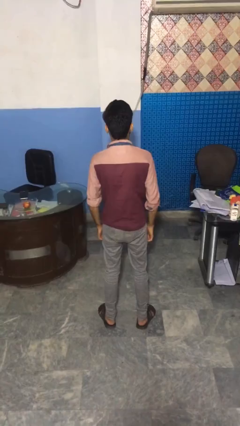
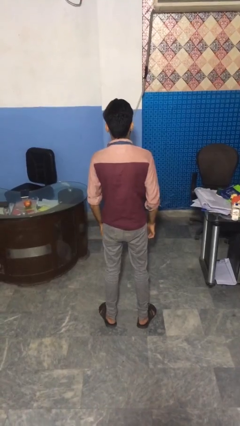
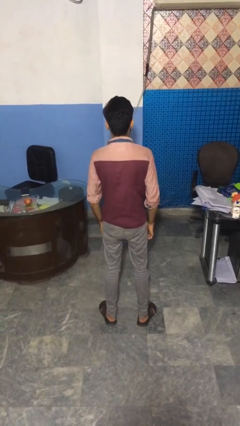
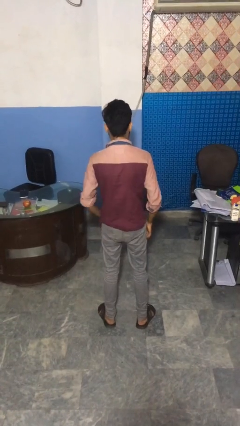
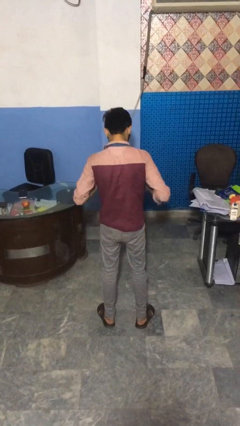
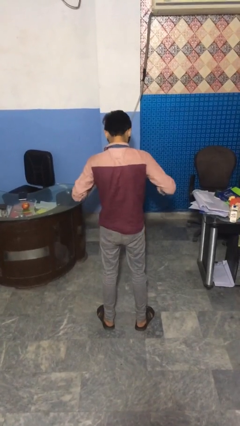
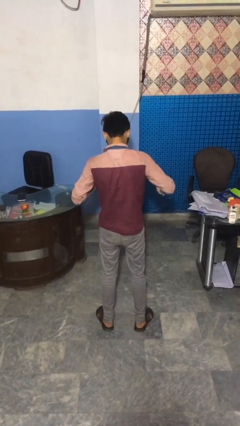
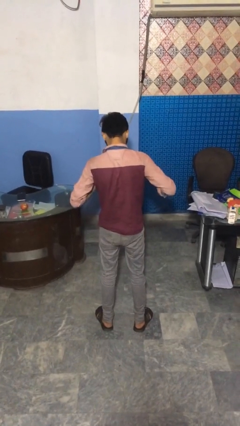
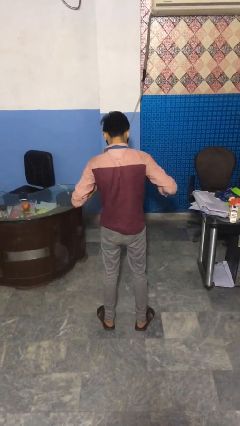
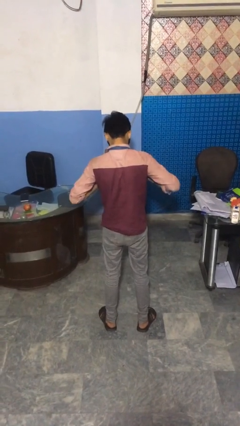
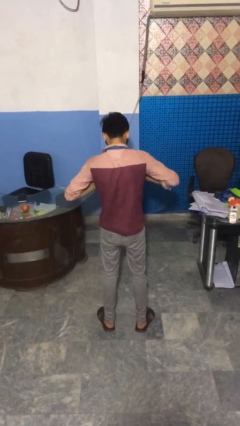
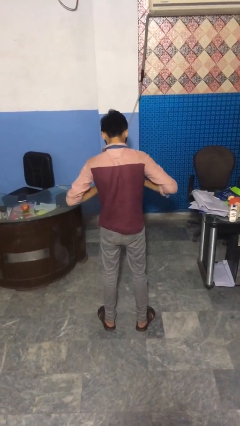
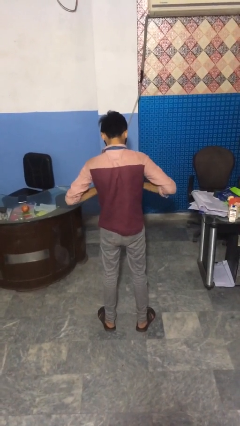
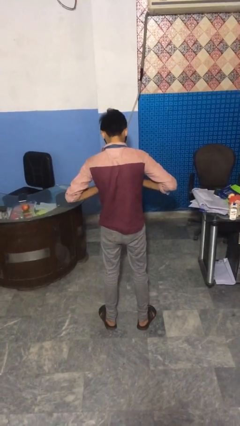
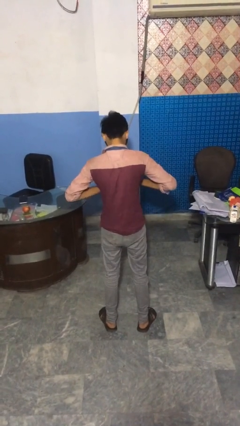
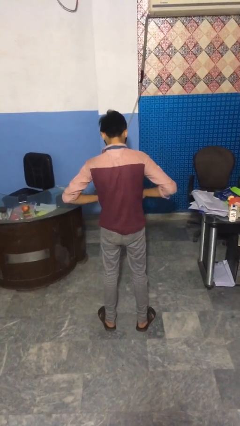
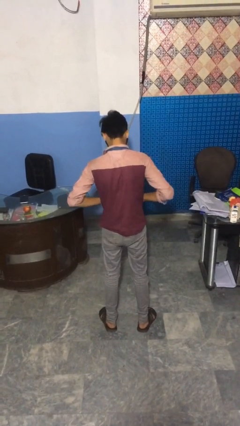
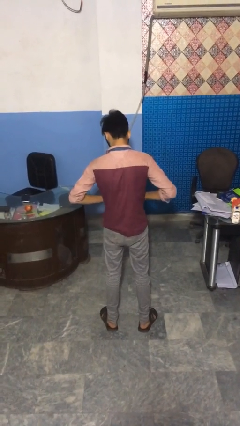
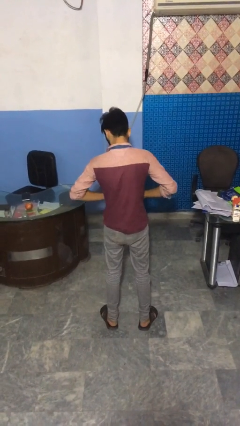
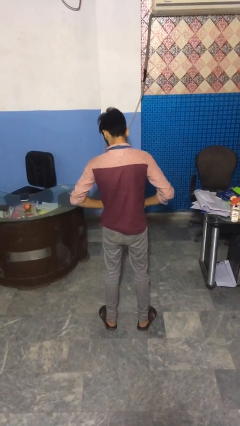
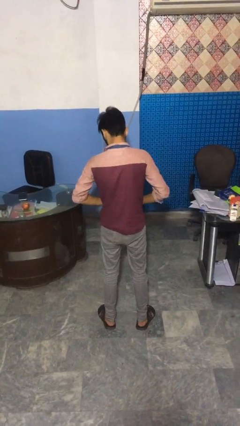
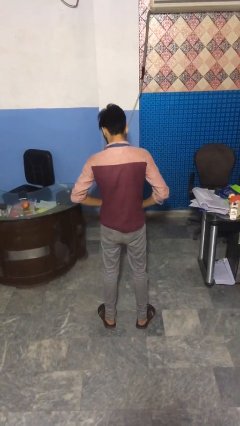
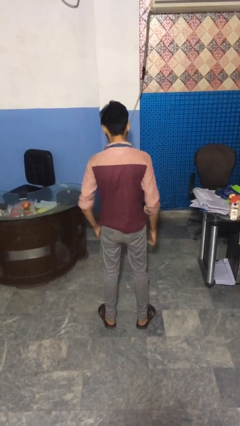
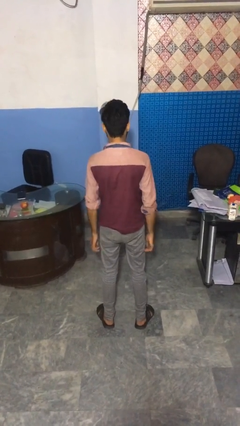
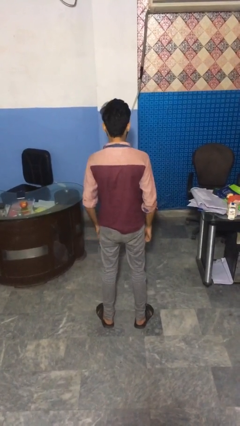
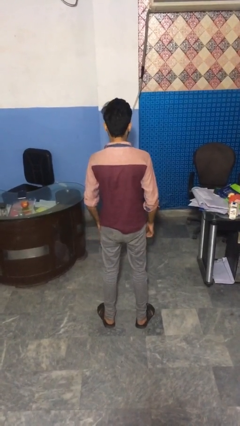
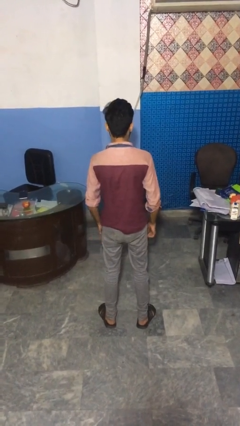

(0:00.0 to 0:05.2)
person unbuttons shirt

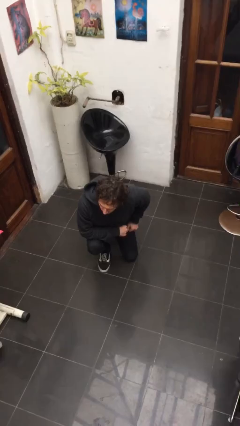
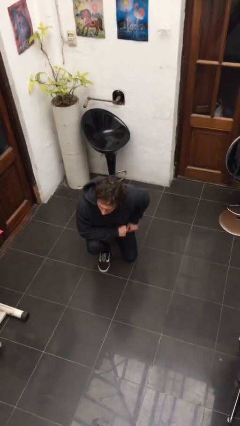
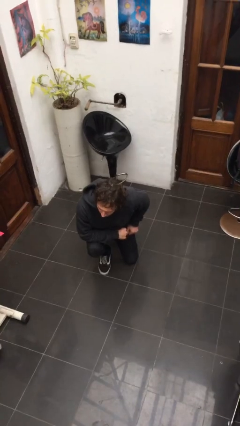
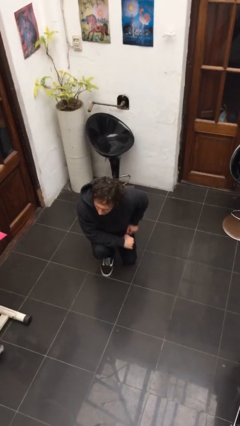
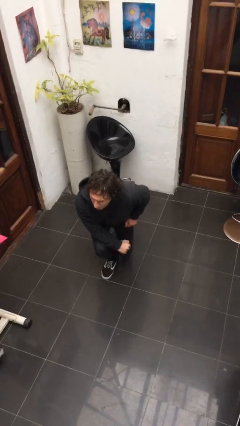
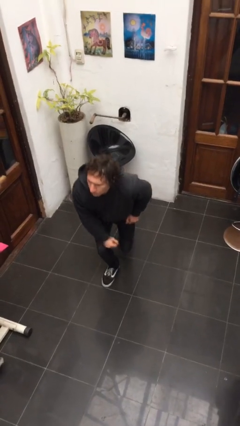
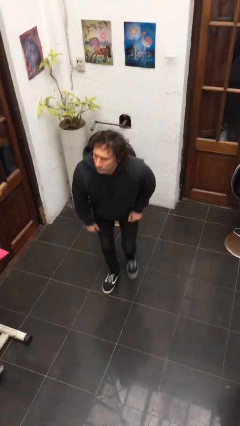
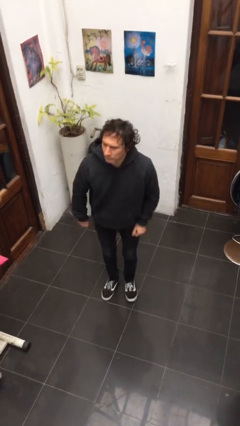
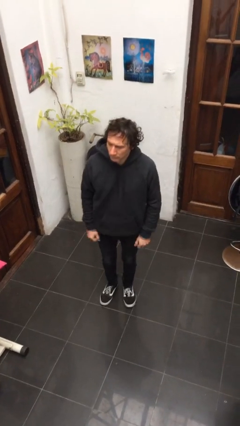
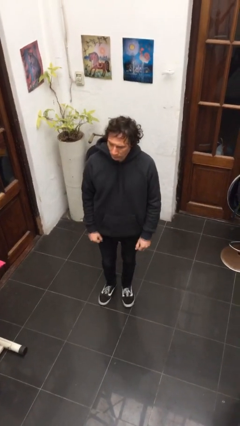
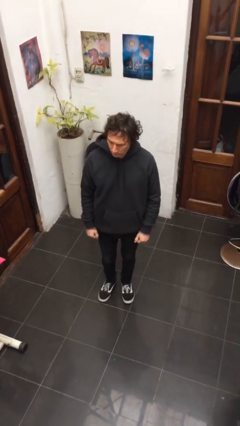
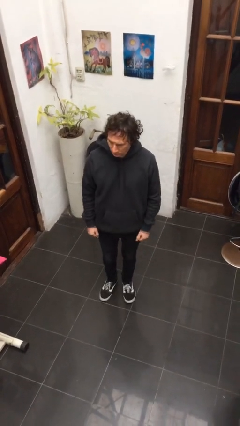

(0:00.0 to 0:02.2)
person stands up from floor

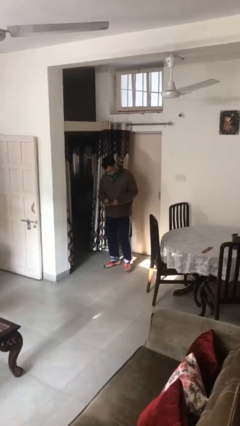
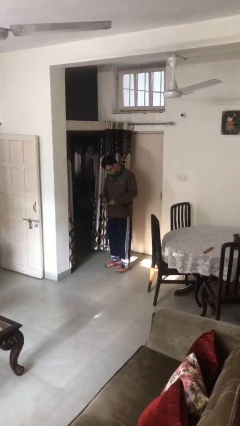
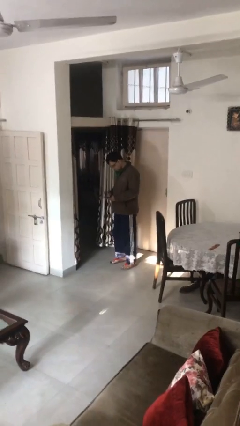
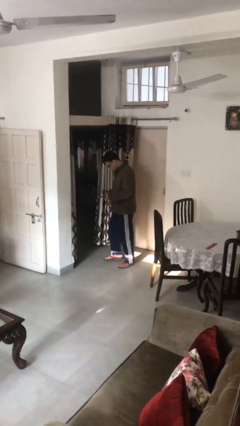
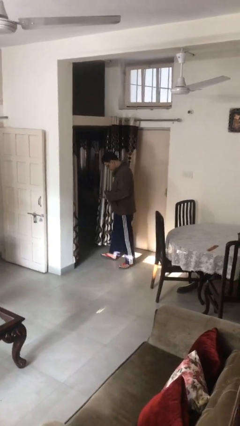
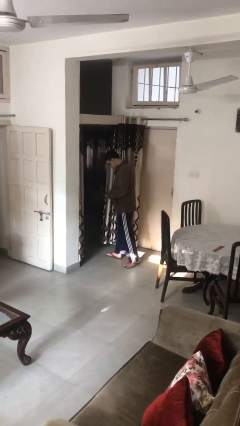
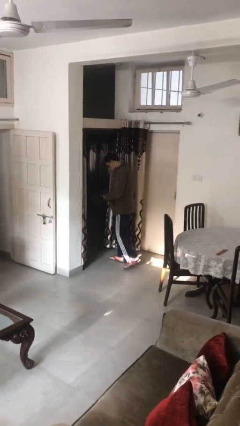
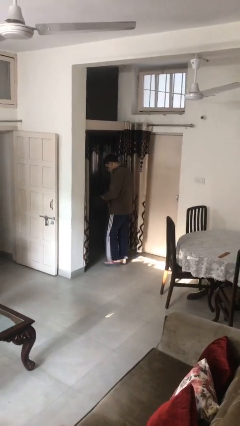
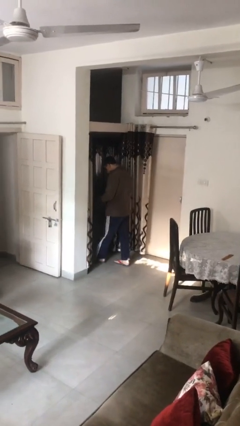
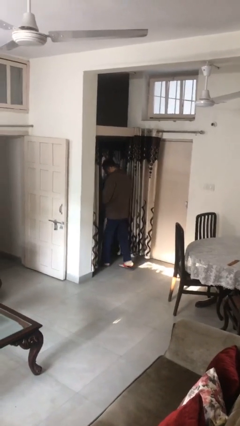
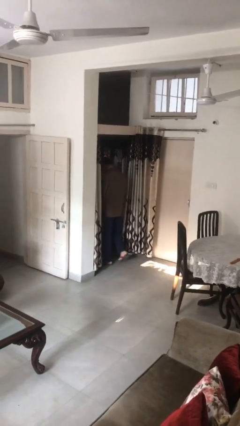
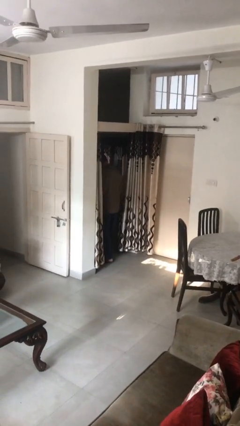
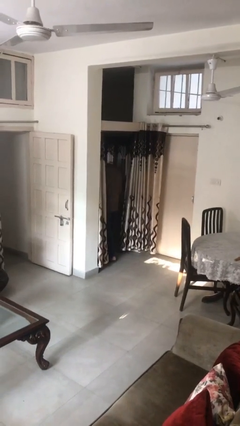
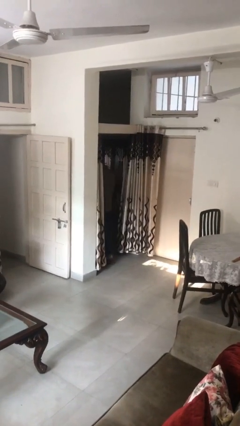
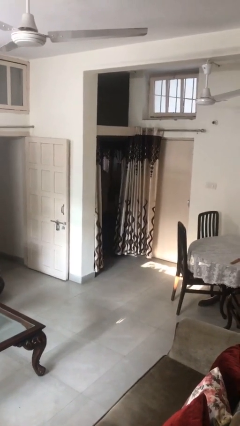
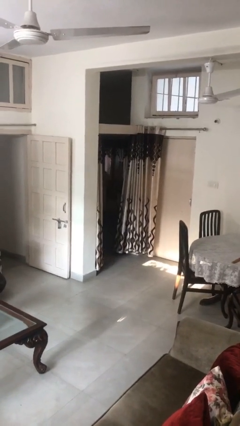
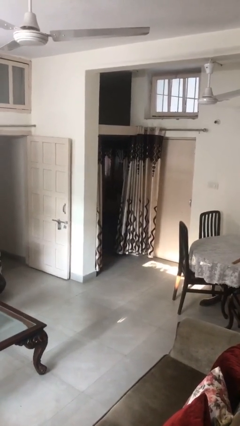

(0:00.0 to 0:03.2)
person exits scene through structure

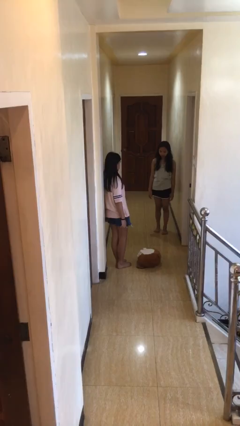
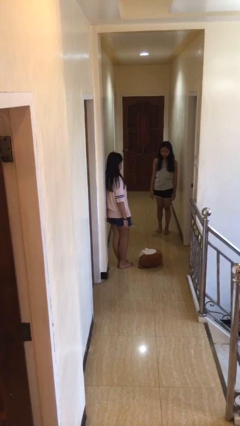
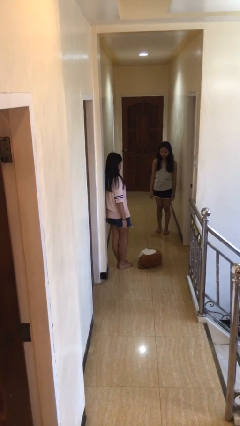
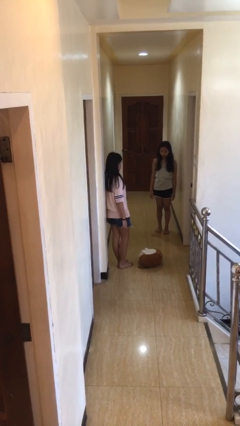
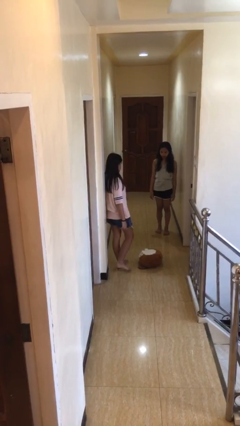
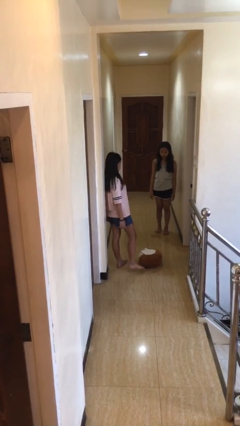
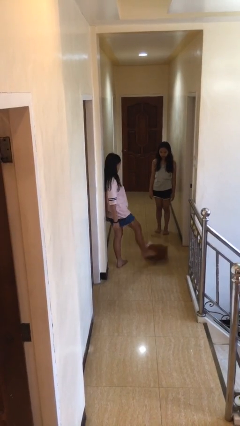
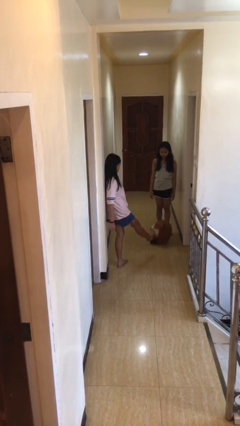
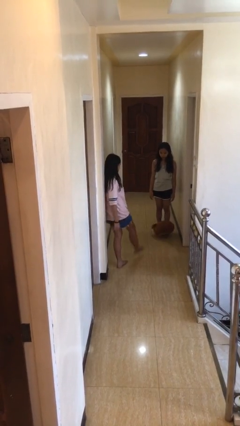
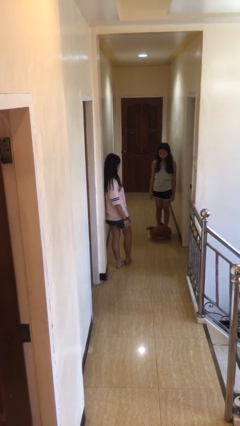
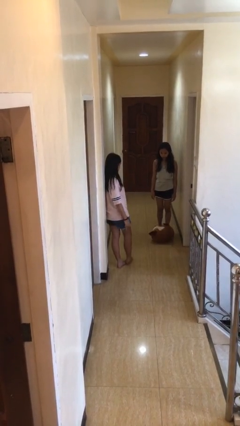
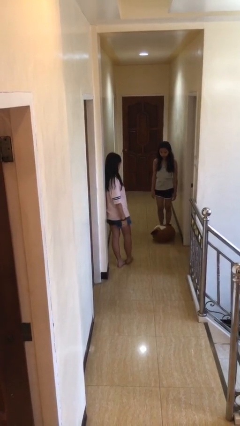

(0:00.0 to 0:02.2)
person kicks object to person

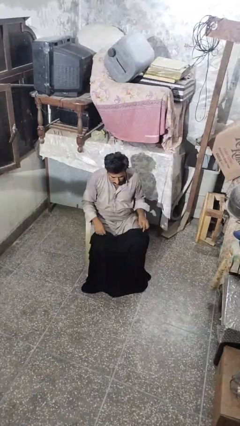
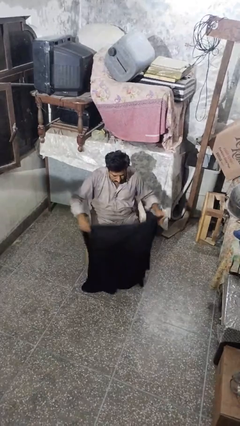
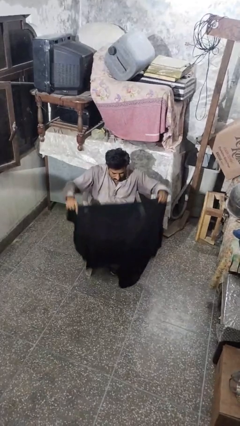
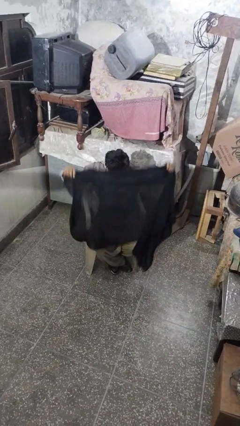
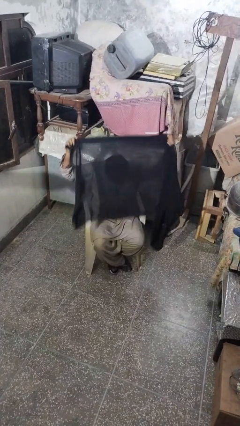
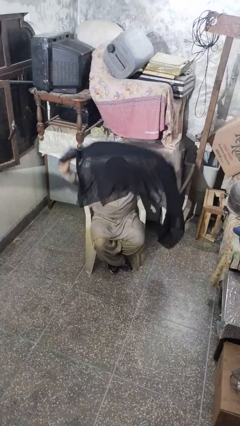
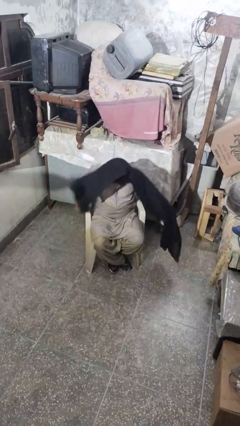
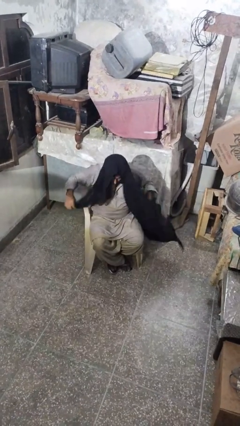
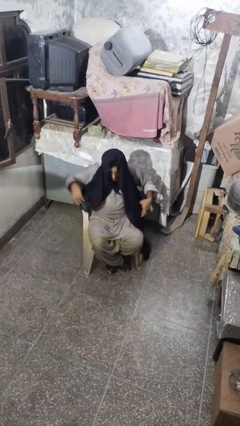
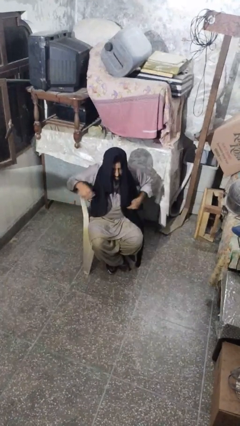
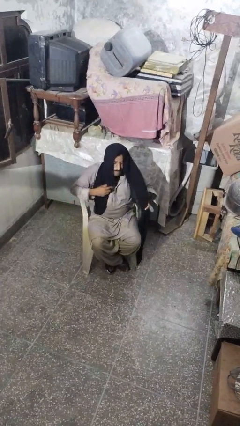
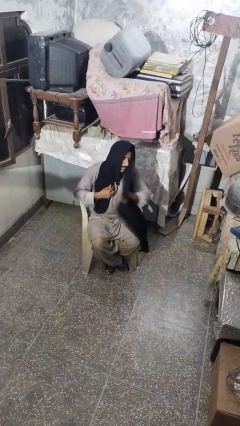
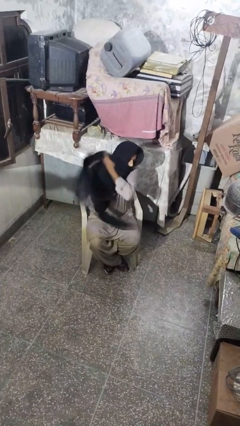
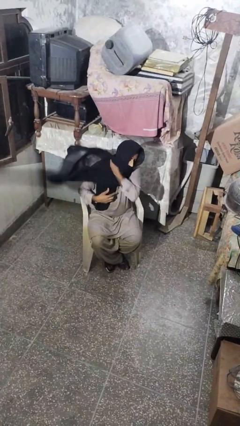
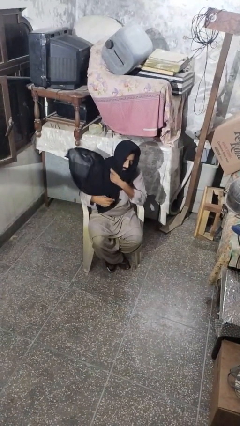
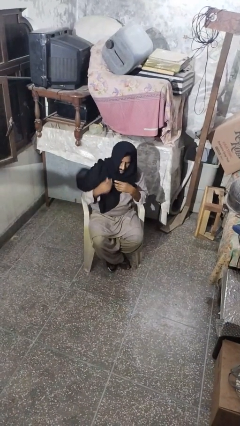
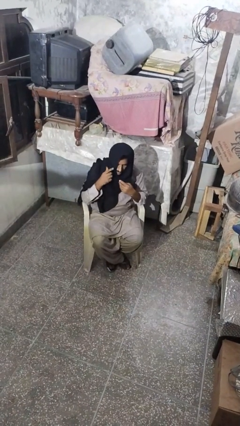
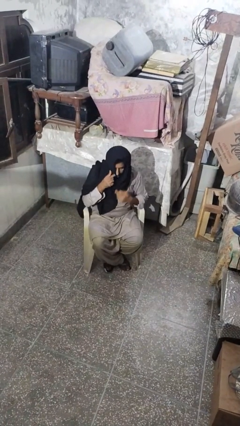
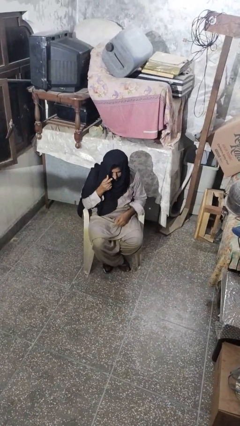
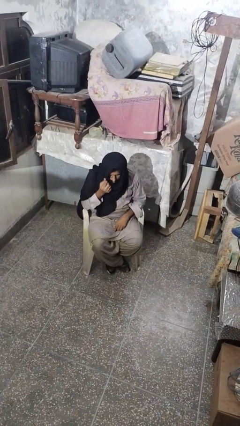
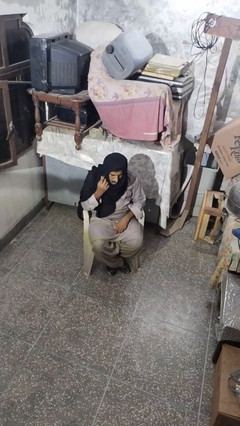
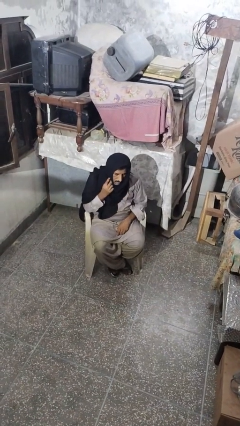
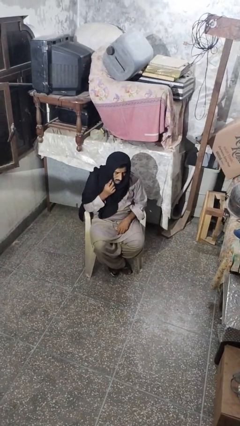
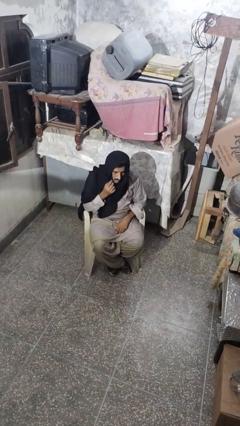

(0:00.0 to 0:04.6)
person puts on scarf
